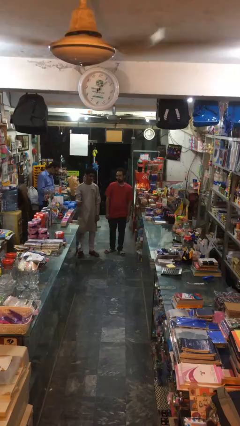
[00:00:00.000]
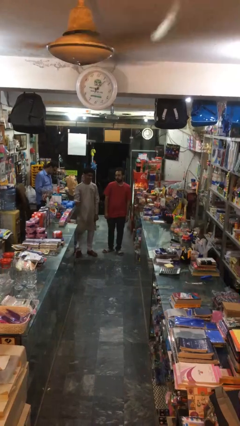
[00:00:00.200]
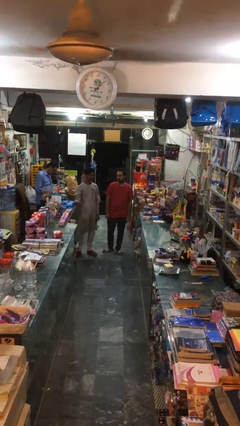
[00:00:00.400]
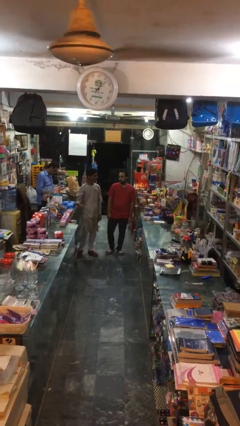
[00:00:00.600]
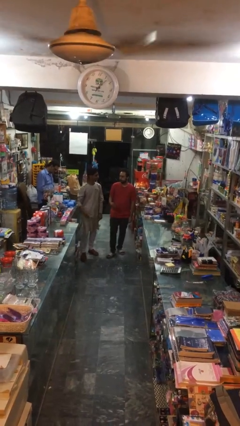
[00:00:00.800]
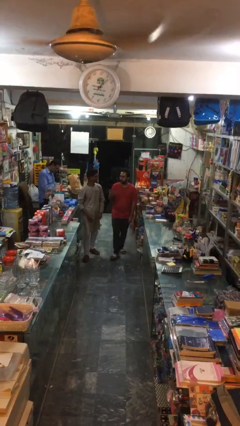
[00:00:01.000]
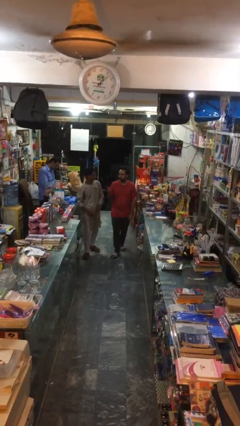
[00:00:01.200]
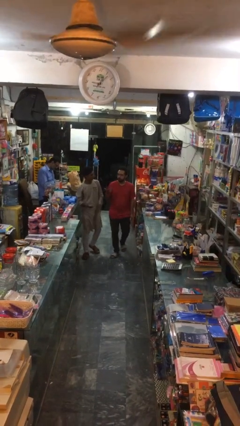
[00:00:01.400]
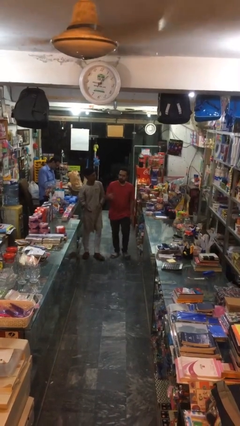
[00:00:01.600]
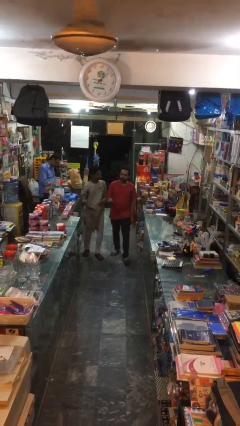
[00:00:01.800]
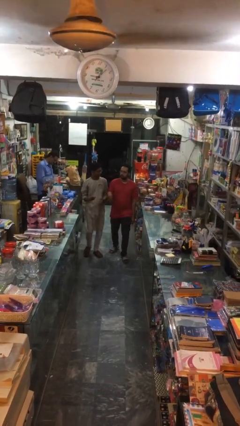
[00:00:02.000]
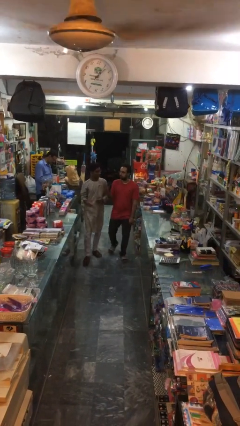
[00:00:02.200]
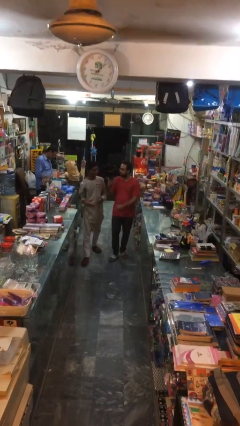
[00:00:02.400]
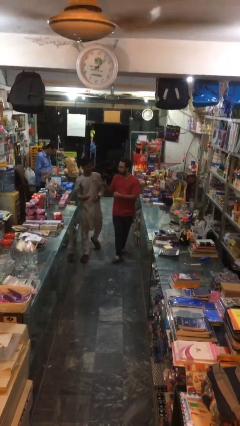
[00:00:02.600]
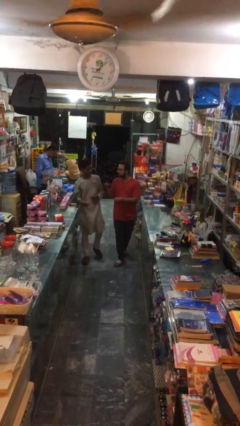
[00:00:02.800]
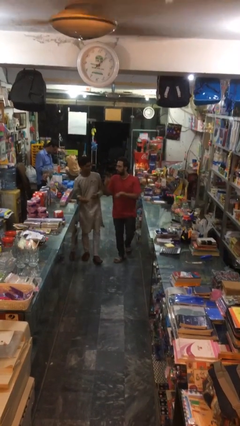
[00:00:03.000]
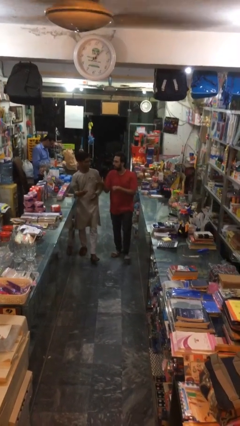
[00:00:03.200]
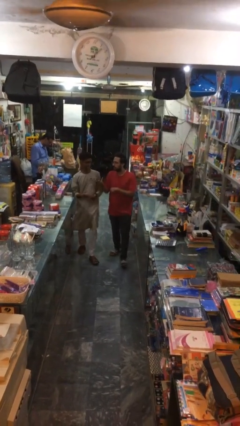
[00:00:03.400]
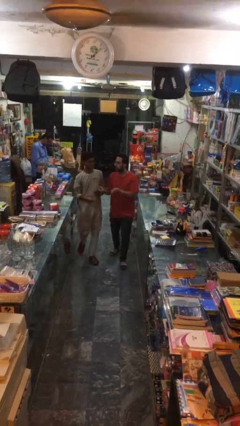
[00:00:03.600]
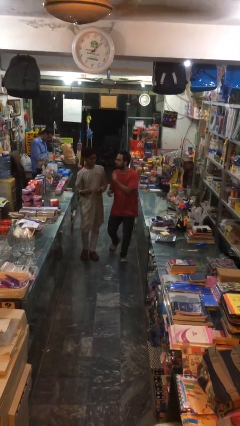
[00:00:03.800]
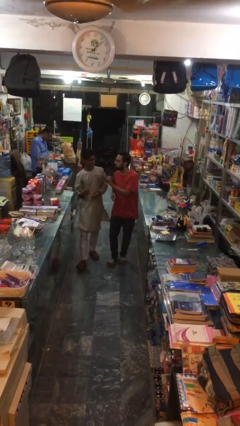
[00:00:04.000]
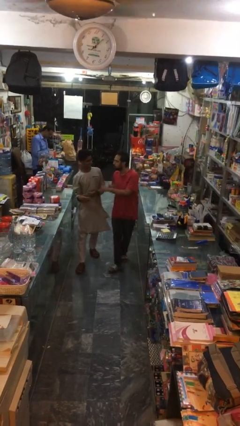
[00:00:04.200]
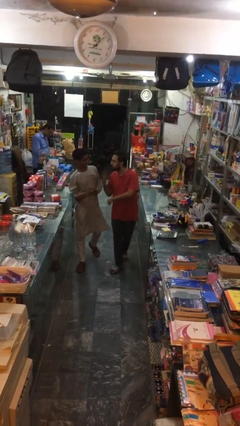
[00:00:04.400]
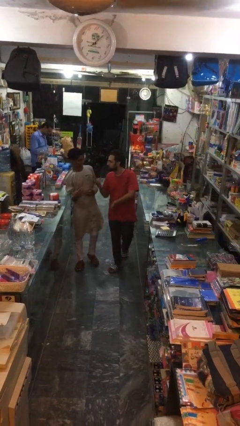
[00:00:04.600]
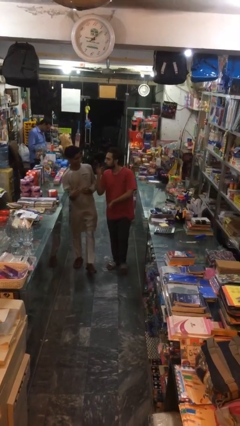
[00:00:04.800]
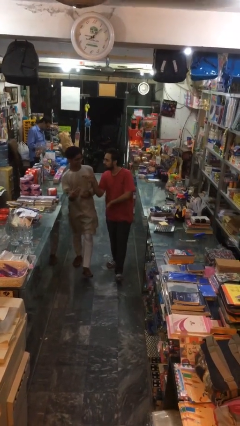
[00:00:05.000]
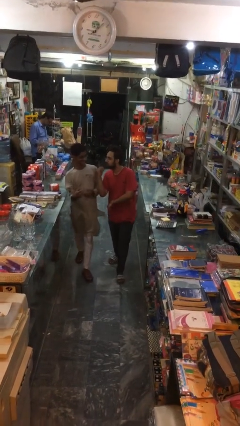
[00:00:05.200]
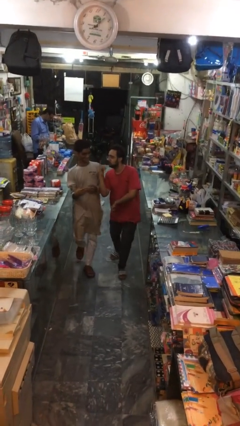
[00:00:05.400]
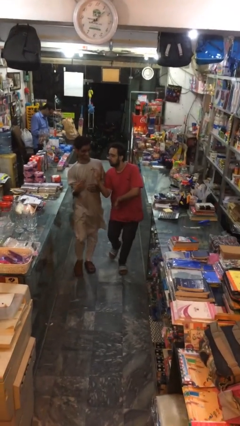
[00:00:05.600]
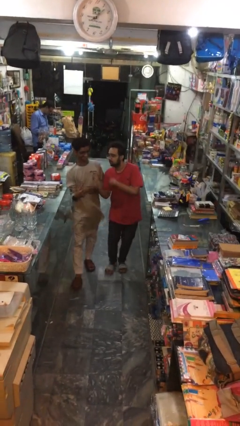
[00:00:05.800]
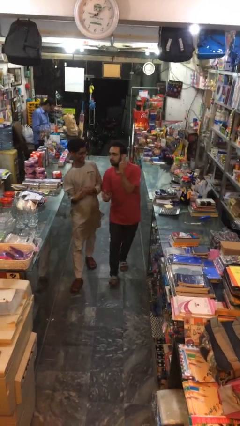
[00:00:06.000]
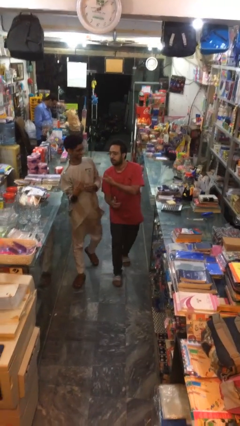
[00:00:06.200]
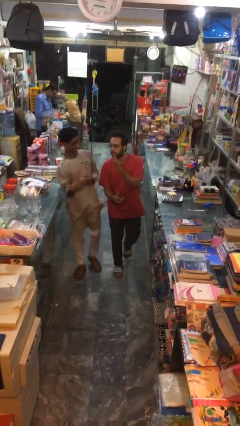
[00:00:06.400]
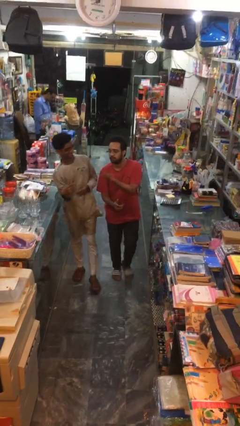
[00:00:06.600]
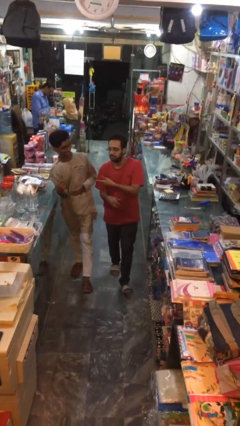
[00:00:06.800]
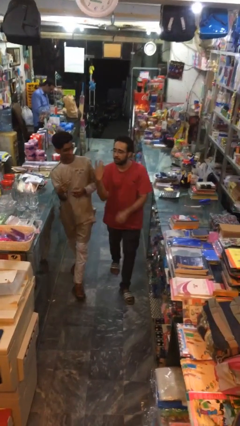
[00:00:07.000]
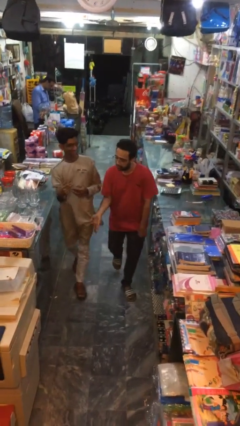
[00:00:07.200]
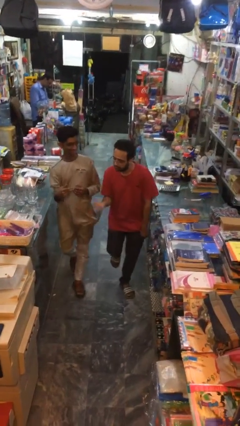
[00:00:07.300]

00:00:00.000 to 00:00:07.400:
person talks to person

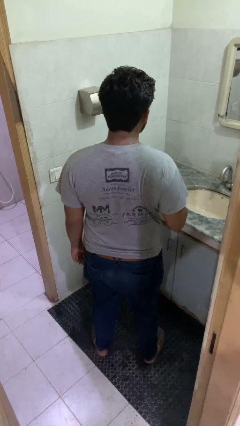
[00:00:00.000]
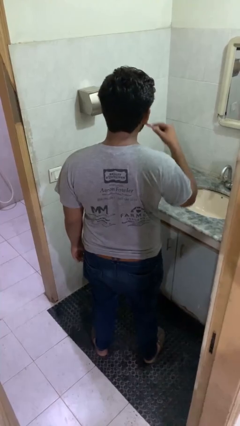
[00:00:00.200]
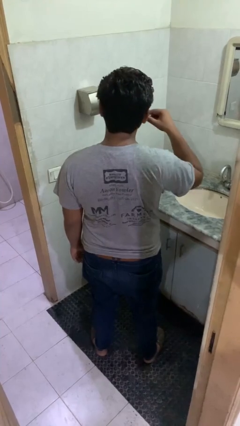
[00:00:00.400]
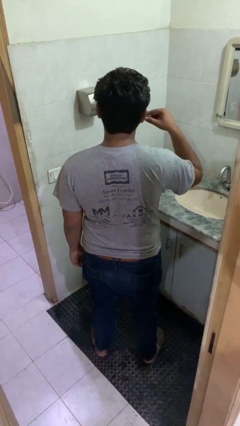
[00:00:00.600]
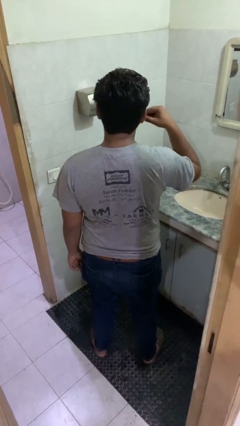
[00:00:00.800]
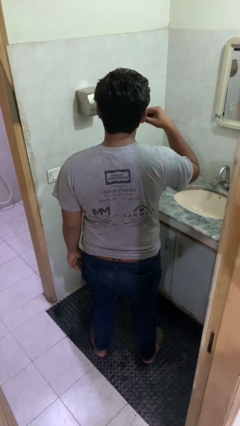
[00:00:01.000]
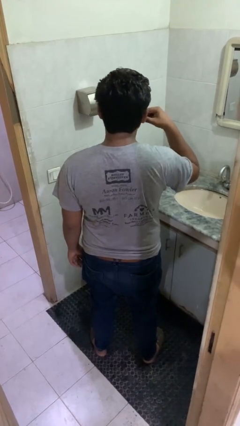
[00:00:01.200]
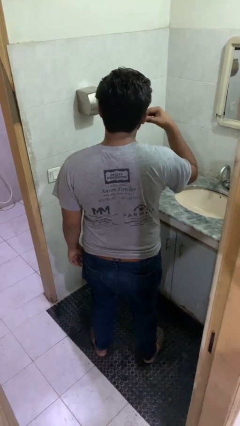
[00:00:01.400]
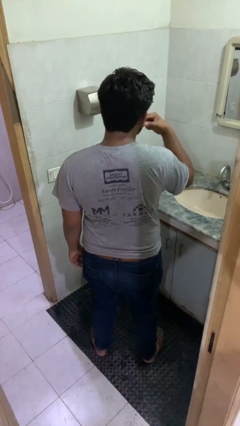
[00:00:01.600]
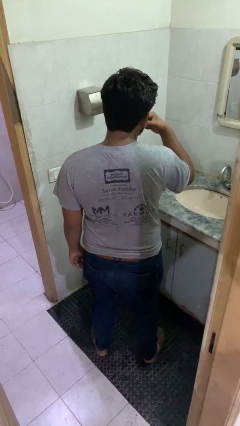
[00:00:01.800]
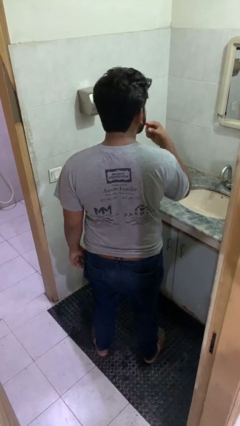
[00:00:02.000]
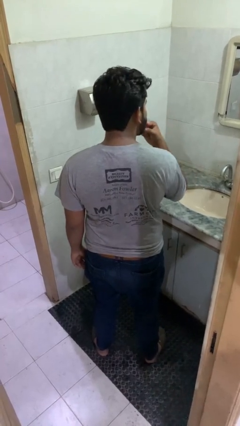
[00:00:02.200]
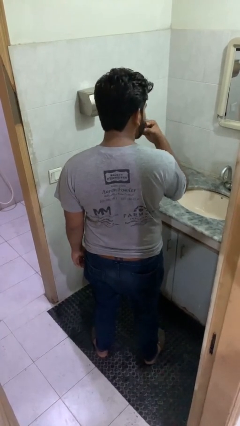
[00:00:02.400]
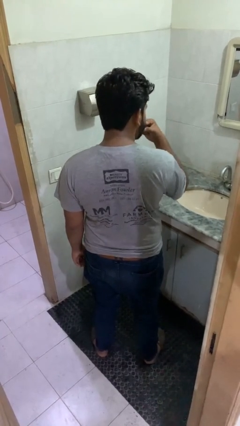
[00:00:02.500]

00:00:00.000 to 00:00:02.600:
person brushes teeth

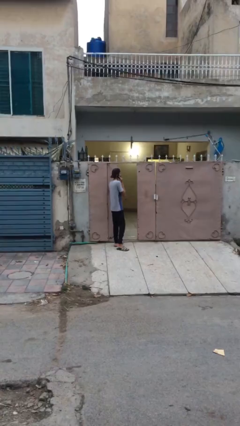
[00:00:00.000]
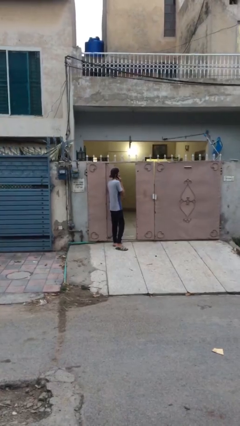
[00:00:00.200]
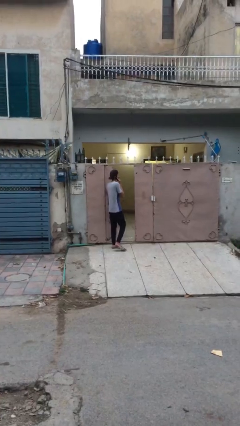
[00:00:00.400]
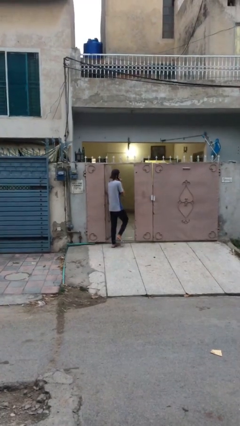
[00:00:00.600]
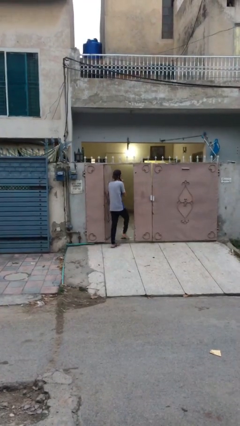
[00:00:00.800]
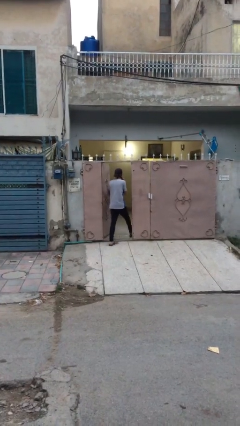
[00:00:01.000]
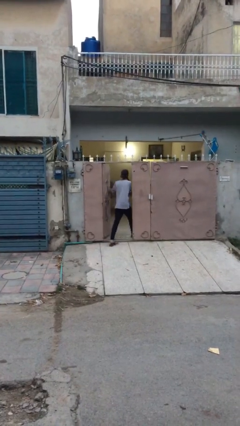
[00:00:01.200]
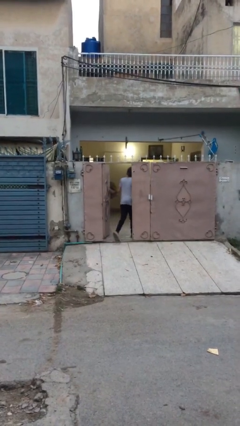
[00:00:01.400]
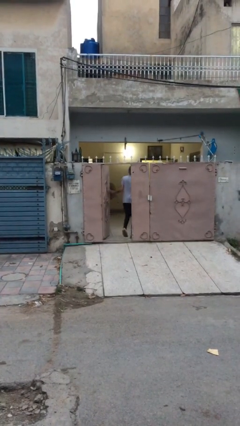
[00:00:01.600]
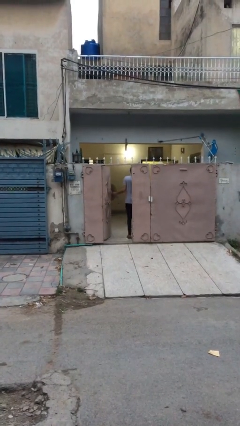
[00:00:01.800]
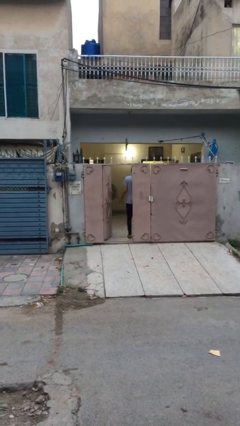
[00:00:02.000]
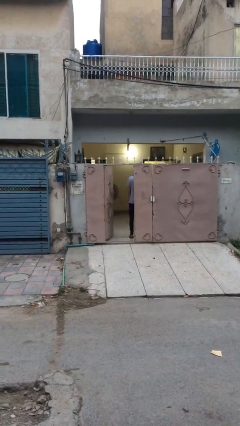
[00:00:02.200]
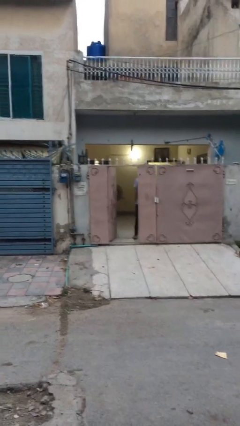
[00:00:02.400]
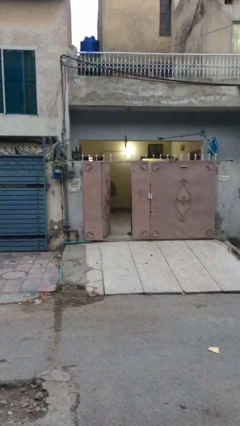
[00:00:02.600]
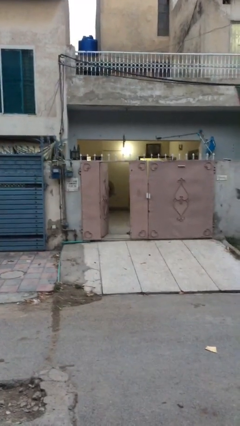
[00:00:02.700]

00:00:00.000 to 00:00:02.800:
person exits scene through structure

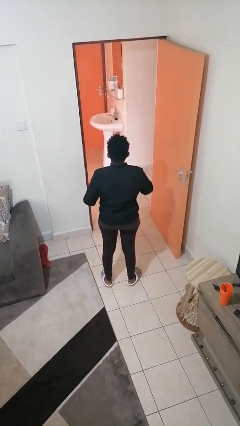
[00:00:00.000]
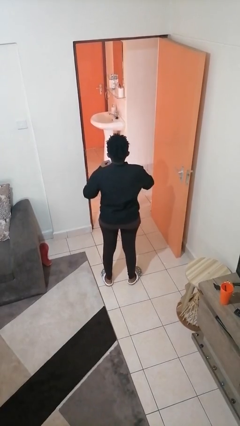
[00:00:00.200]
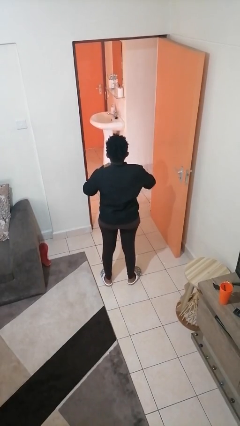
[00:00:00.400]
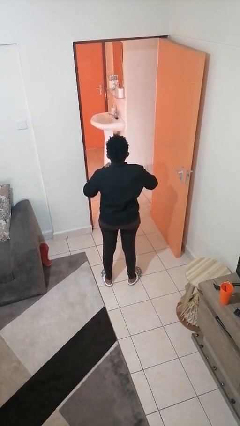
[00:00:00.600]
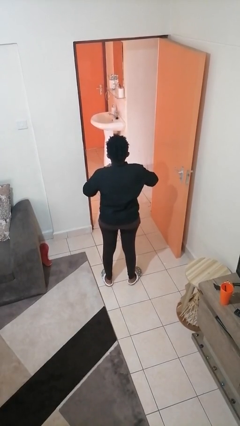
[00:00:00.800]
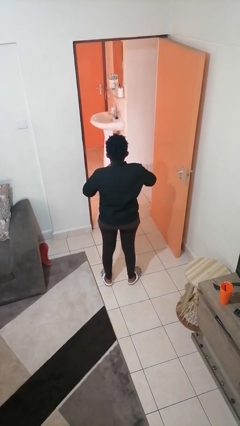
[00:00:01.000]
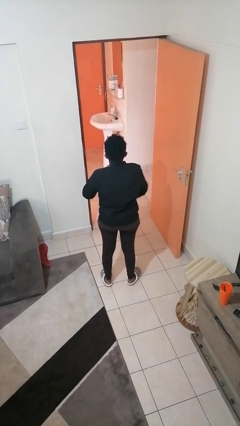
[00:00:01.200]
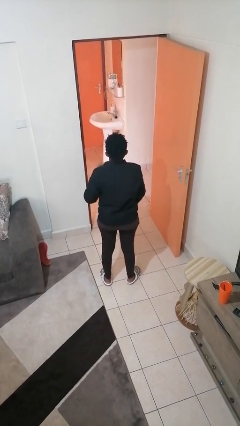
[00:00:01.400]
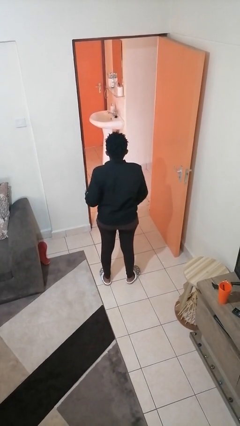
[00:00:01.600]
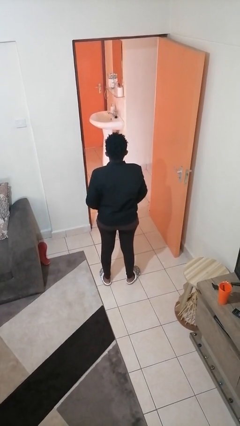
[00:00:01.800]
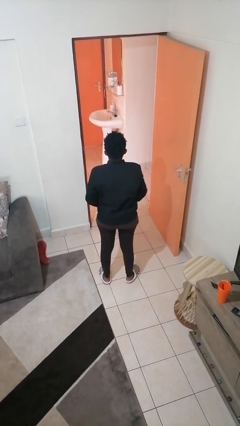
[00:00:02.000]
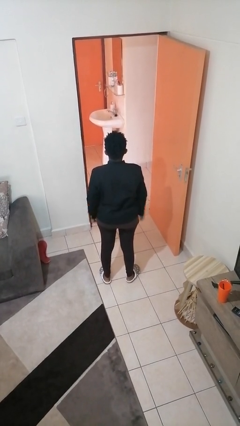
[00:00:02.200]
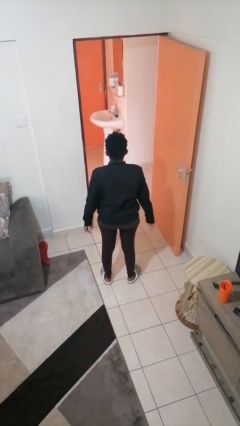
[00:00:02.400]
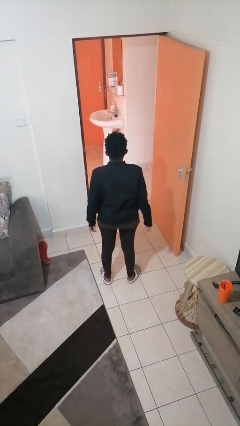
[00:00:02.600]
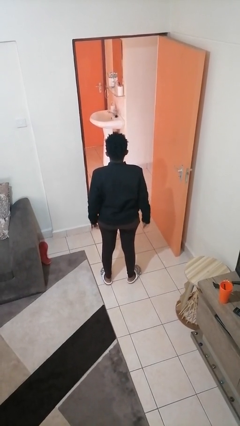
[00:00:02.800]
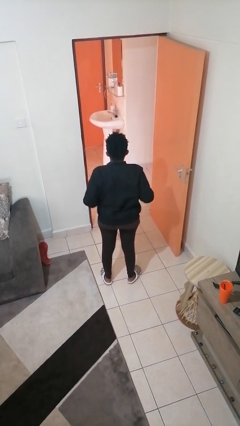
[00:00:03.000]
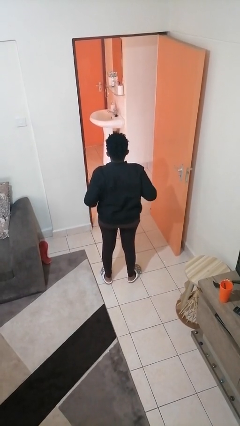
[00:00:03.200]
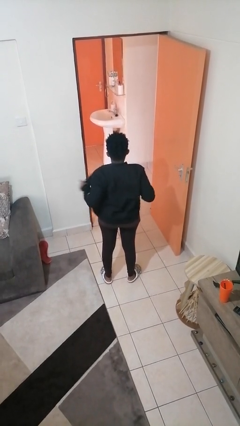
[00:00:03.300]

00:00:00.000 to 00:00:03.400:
person unzips jacket

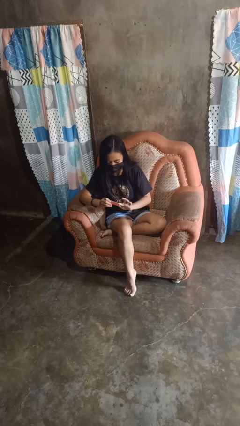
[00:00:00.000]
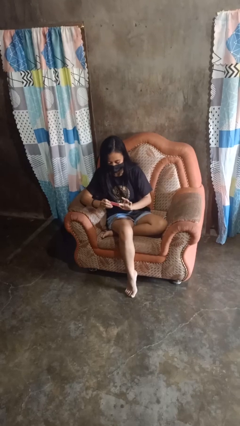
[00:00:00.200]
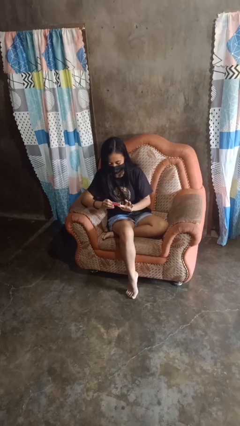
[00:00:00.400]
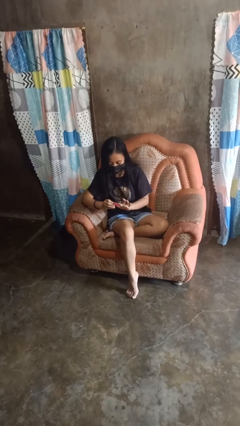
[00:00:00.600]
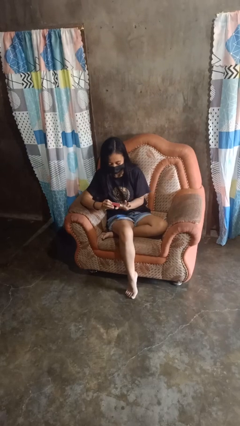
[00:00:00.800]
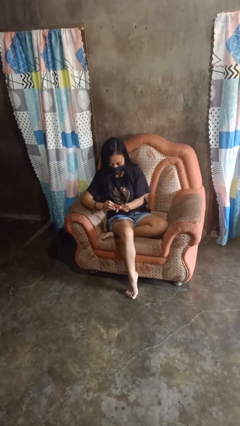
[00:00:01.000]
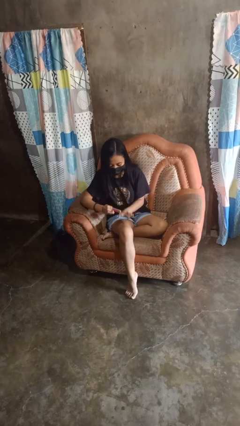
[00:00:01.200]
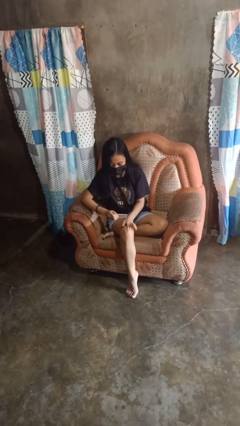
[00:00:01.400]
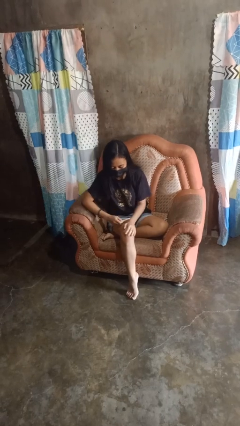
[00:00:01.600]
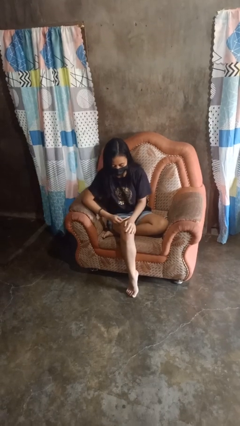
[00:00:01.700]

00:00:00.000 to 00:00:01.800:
person files fingernails
